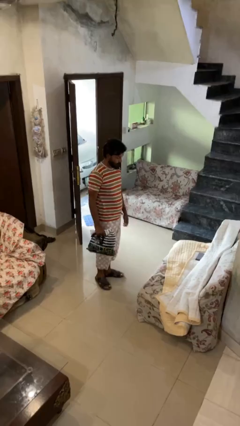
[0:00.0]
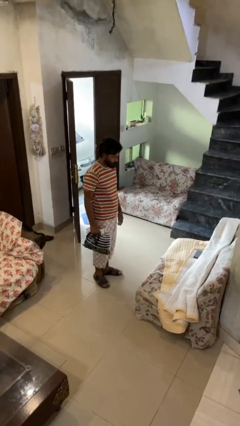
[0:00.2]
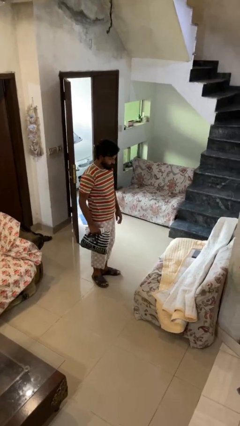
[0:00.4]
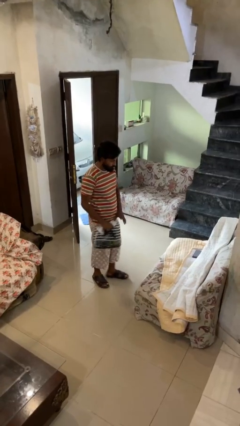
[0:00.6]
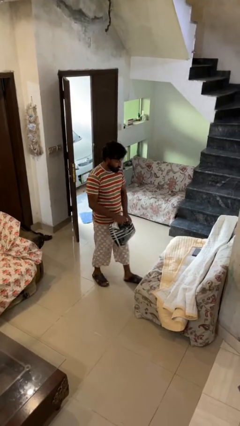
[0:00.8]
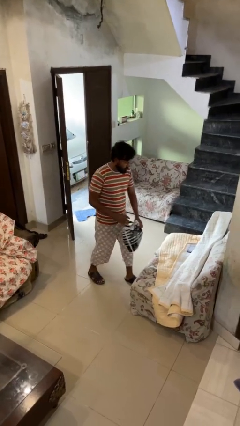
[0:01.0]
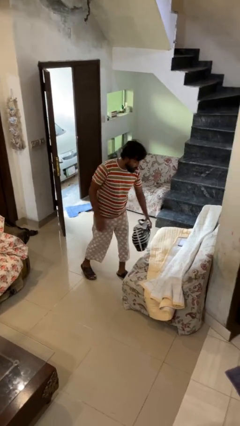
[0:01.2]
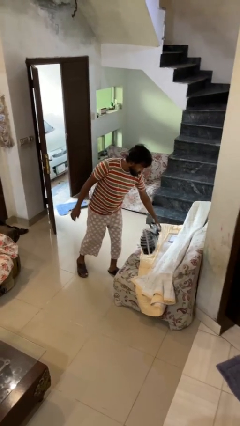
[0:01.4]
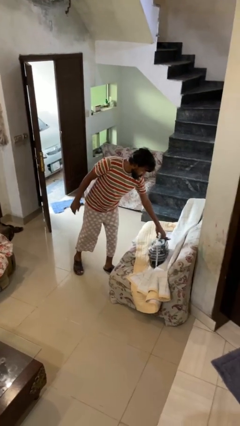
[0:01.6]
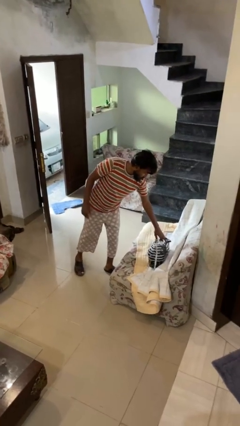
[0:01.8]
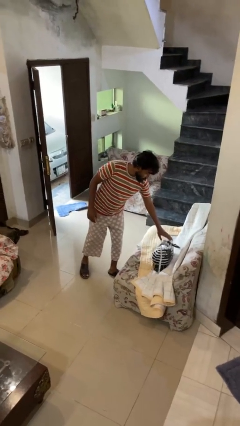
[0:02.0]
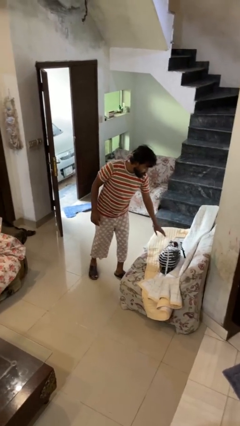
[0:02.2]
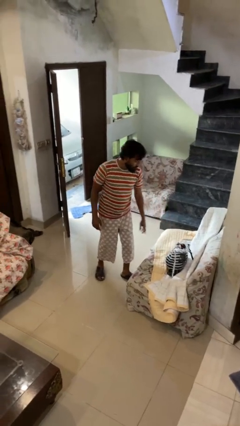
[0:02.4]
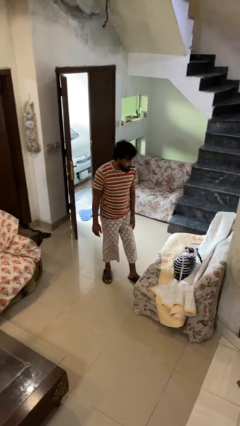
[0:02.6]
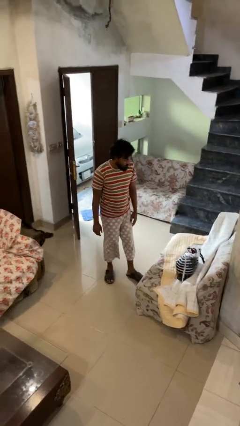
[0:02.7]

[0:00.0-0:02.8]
person puts down object on couch

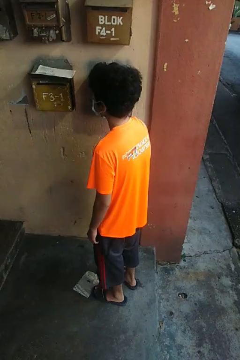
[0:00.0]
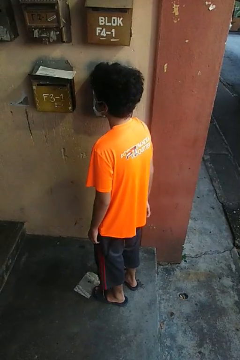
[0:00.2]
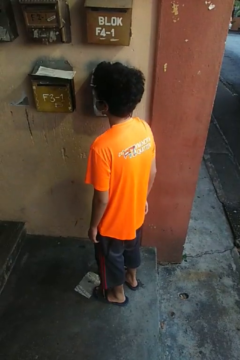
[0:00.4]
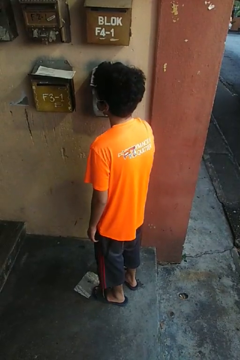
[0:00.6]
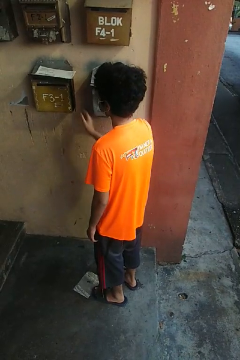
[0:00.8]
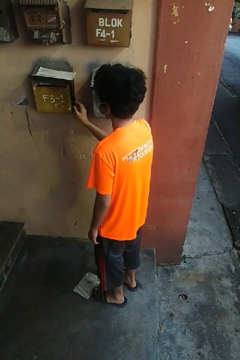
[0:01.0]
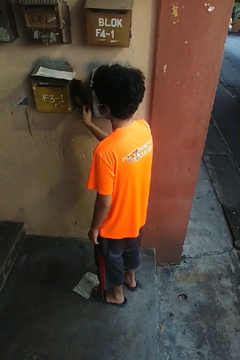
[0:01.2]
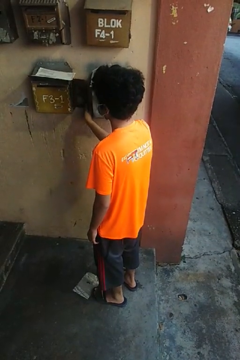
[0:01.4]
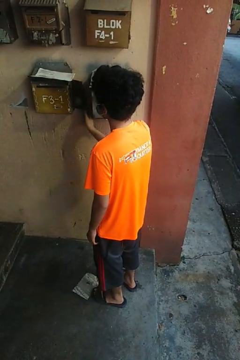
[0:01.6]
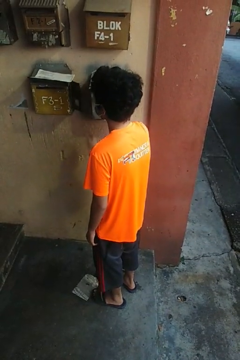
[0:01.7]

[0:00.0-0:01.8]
person opens mailbox

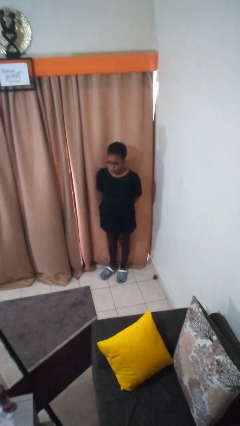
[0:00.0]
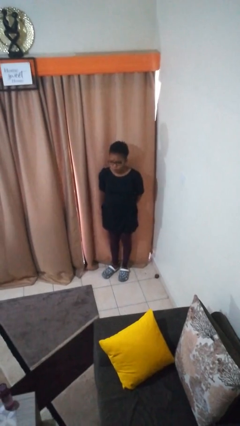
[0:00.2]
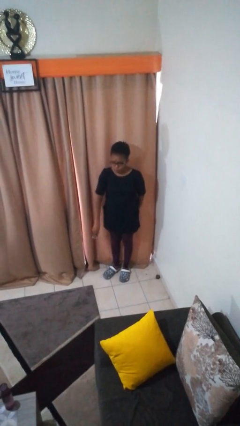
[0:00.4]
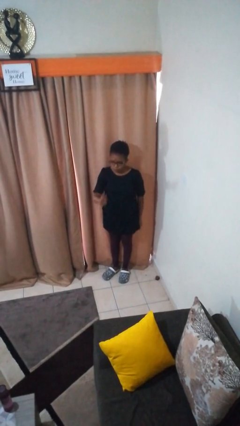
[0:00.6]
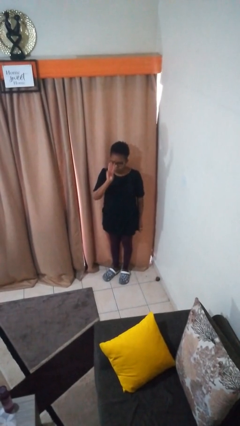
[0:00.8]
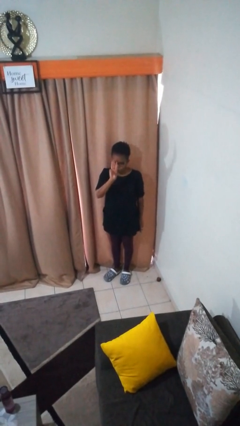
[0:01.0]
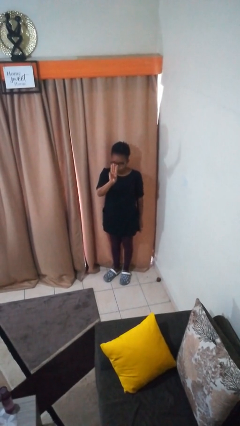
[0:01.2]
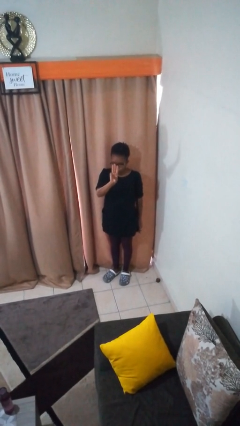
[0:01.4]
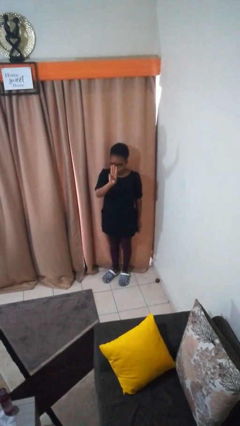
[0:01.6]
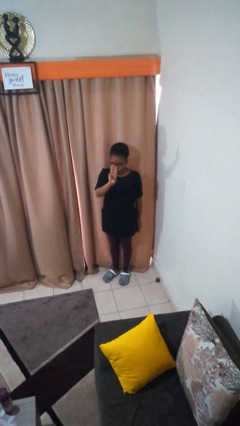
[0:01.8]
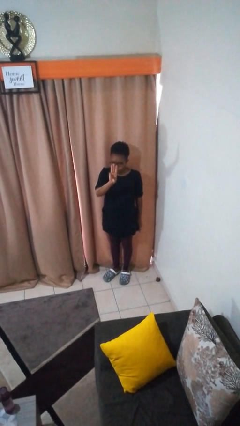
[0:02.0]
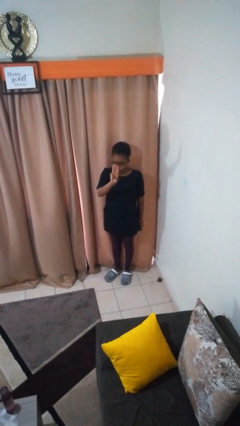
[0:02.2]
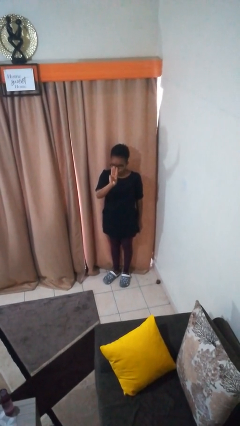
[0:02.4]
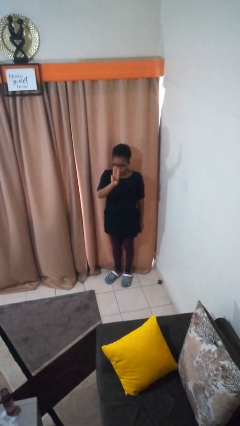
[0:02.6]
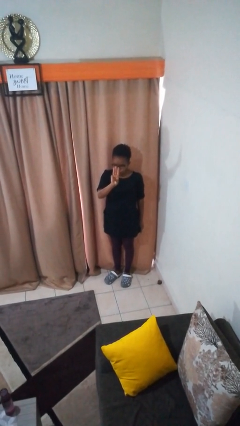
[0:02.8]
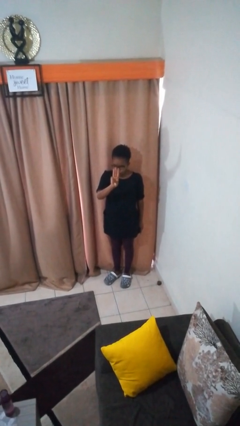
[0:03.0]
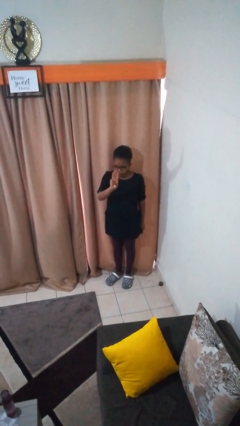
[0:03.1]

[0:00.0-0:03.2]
person gestures number three

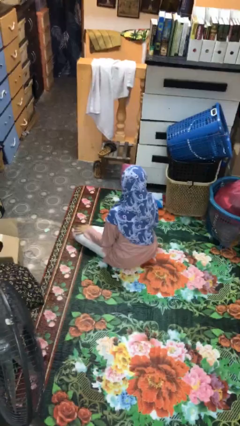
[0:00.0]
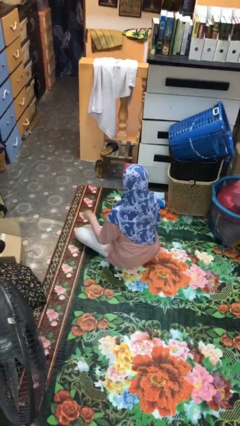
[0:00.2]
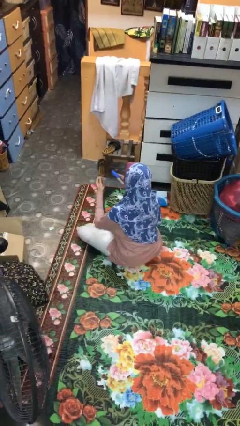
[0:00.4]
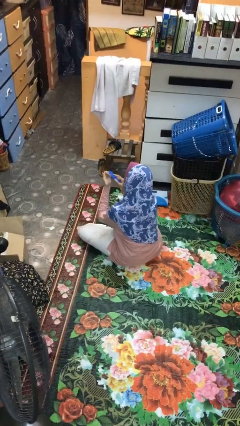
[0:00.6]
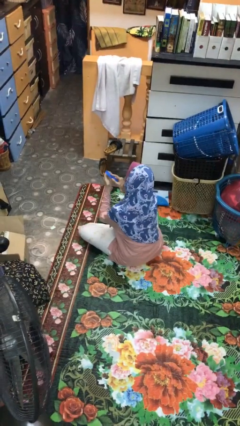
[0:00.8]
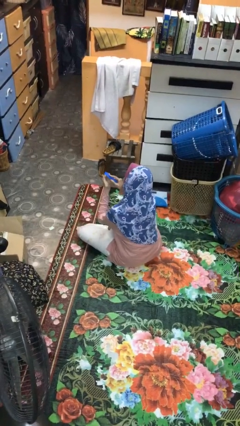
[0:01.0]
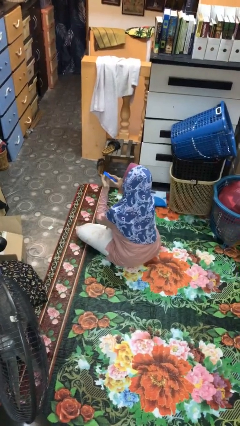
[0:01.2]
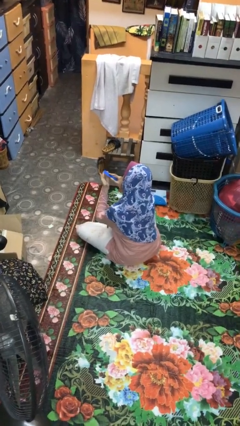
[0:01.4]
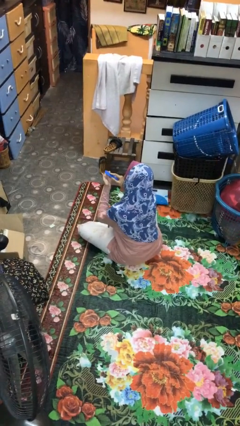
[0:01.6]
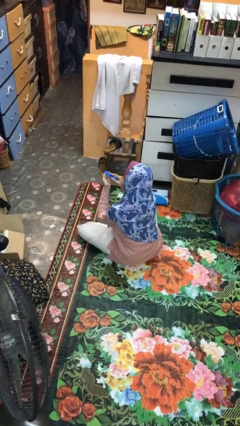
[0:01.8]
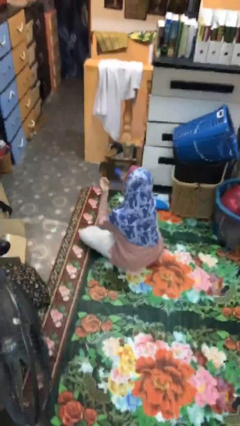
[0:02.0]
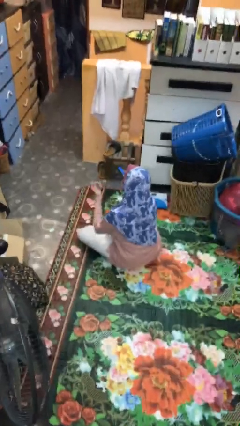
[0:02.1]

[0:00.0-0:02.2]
person files fingernails

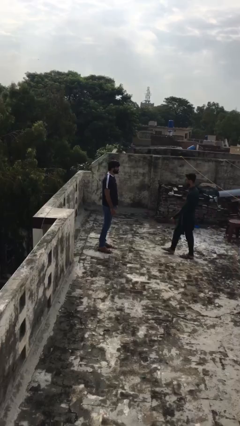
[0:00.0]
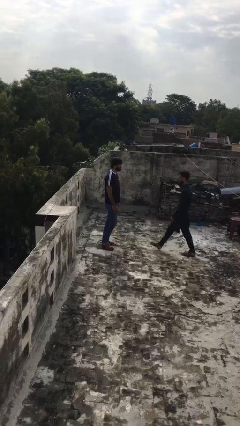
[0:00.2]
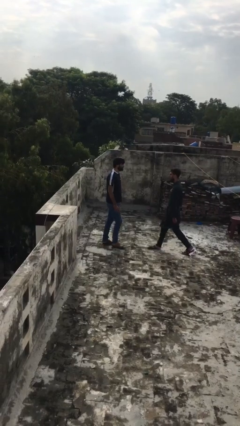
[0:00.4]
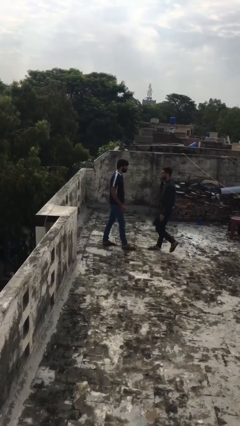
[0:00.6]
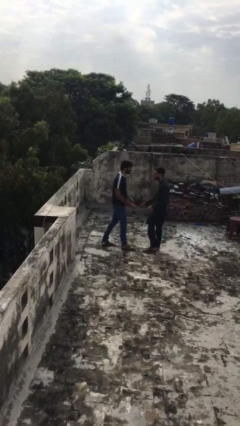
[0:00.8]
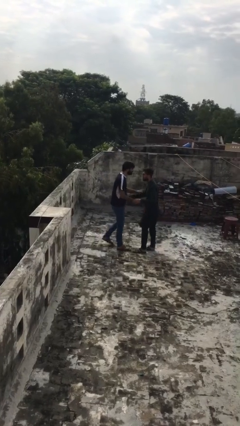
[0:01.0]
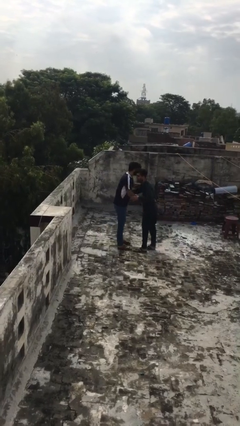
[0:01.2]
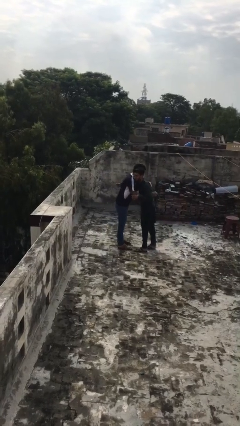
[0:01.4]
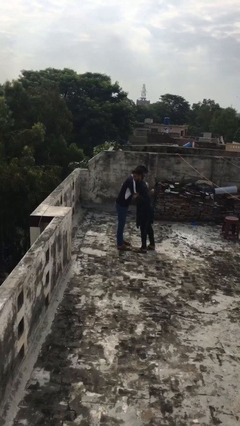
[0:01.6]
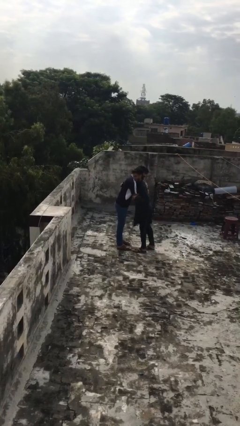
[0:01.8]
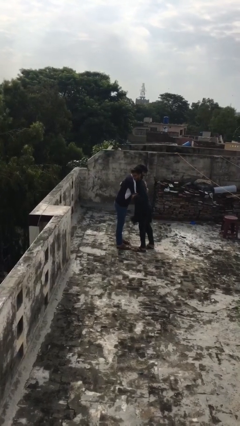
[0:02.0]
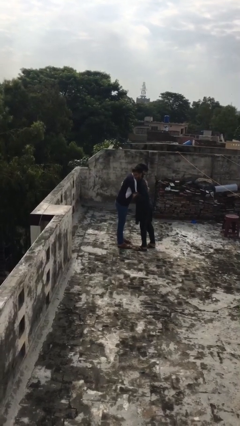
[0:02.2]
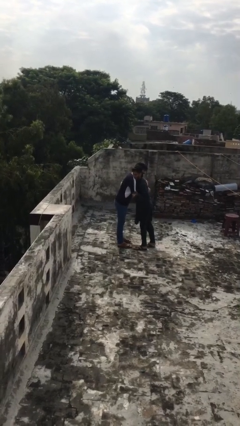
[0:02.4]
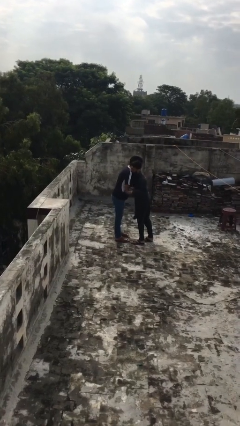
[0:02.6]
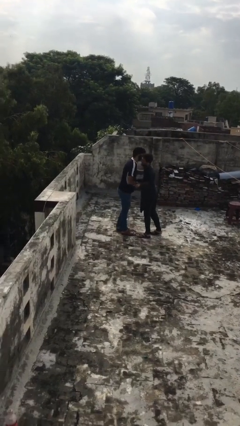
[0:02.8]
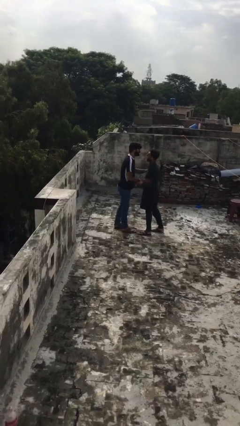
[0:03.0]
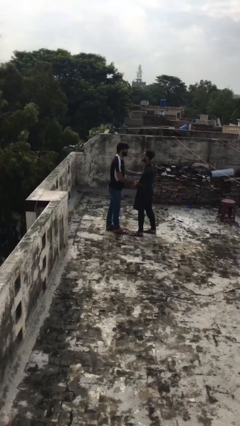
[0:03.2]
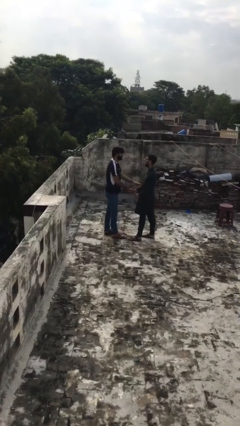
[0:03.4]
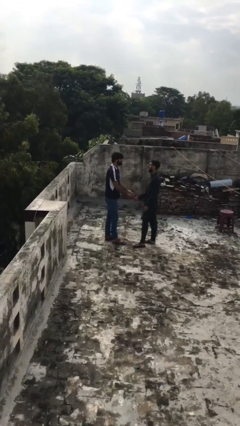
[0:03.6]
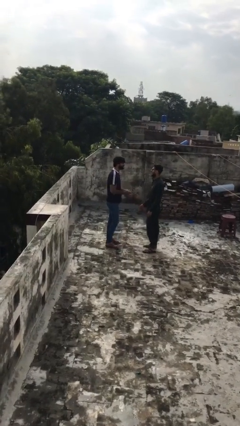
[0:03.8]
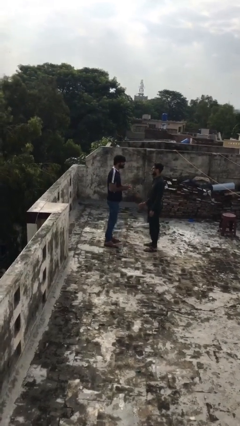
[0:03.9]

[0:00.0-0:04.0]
person embraces person

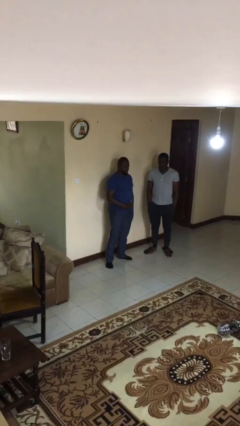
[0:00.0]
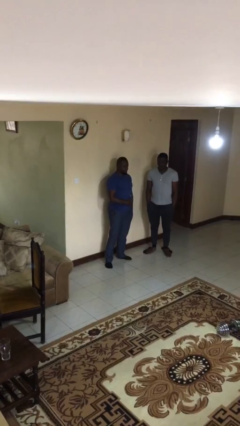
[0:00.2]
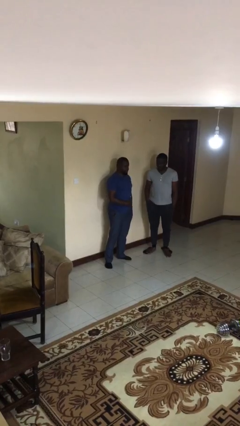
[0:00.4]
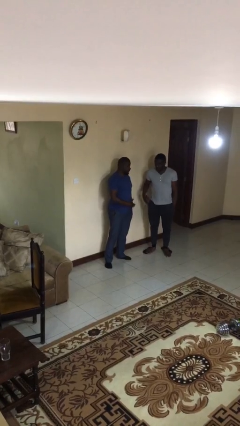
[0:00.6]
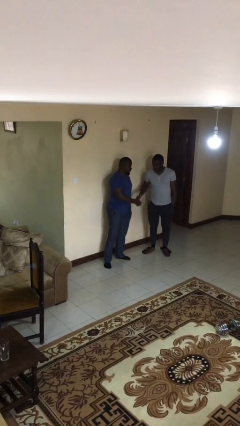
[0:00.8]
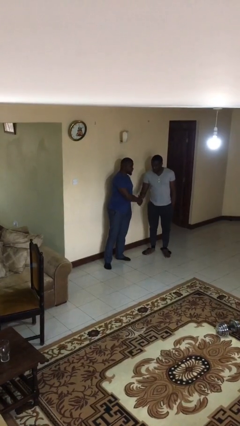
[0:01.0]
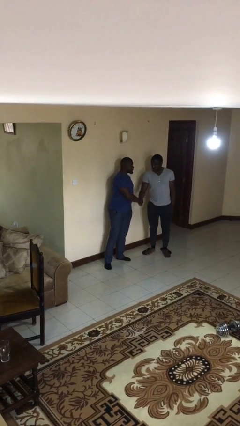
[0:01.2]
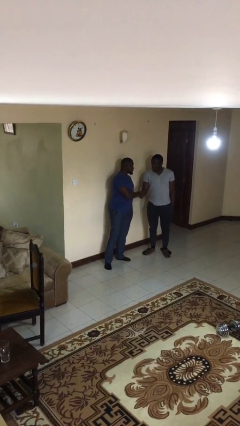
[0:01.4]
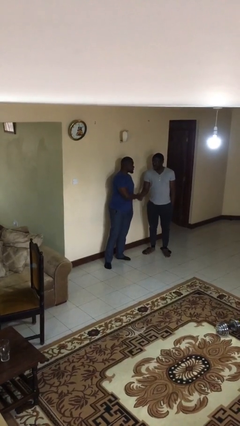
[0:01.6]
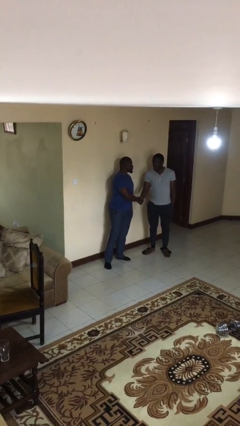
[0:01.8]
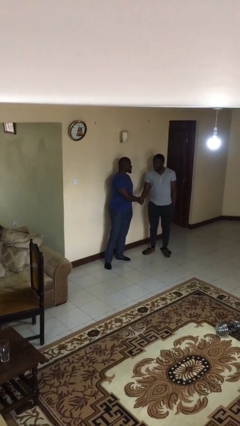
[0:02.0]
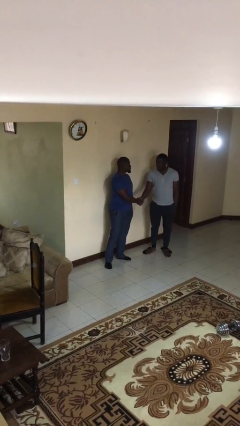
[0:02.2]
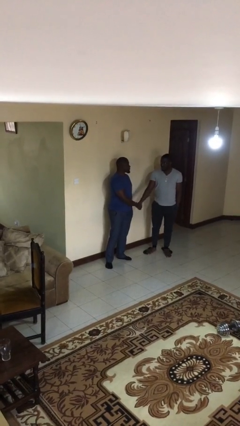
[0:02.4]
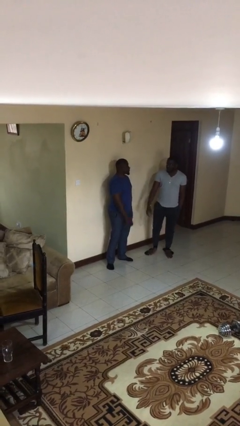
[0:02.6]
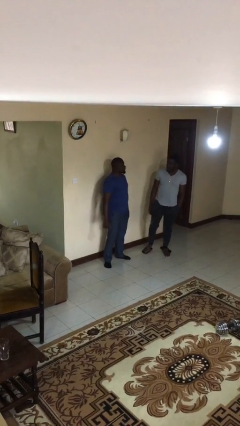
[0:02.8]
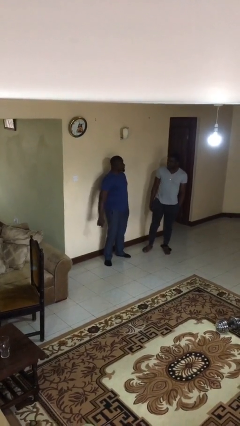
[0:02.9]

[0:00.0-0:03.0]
person shakes hand

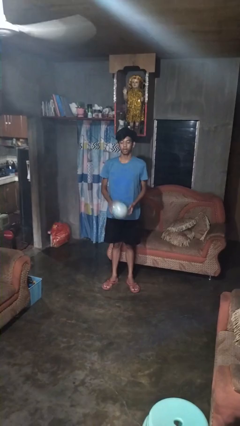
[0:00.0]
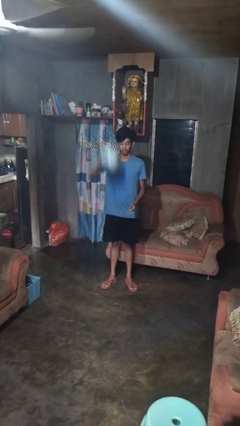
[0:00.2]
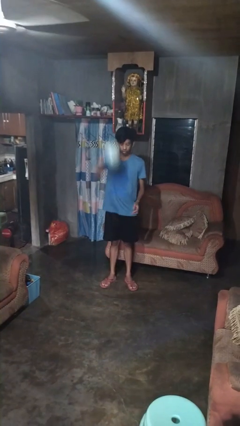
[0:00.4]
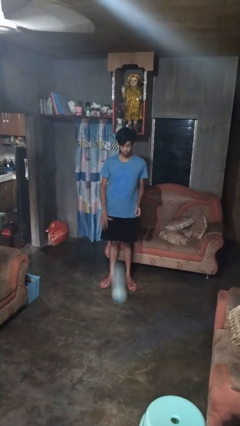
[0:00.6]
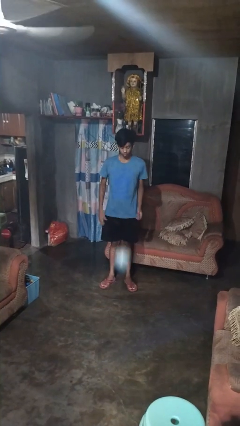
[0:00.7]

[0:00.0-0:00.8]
person bounces ball on floor
